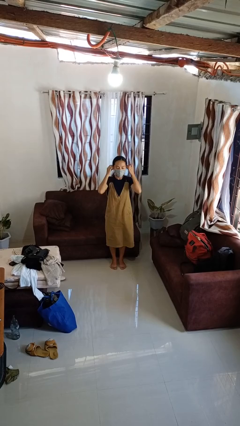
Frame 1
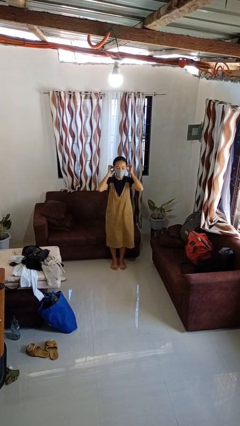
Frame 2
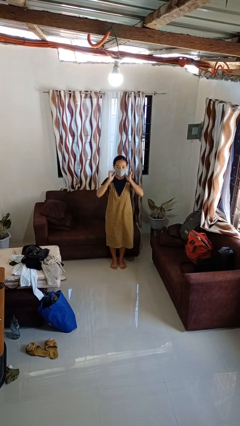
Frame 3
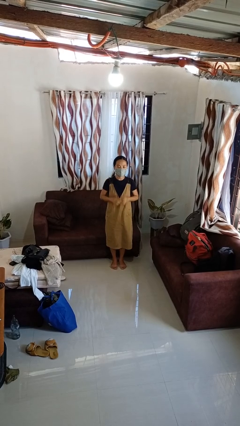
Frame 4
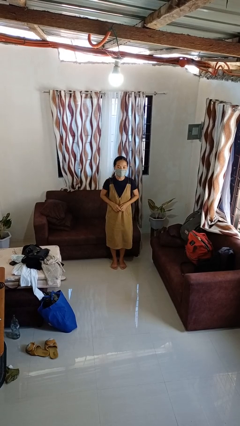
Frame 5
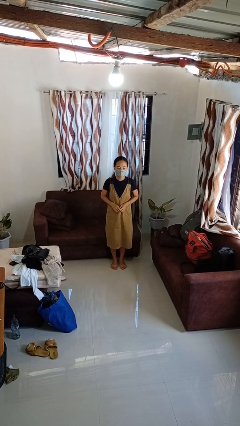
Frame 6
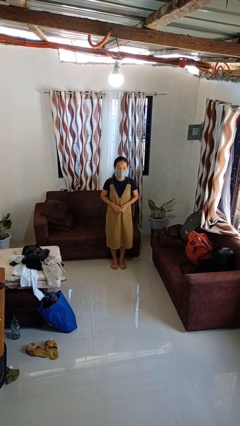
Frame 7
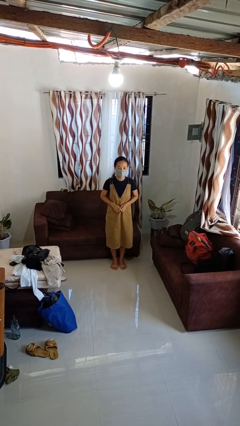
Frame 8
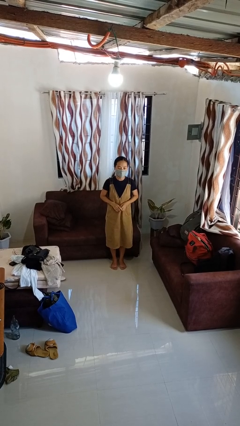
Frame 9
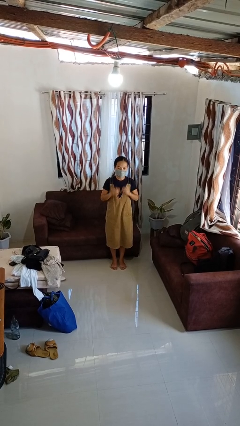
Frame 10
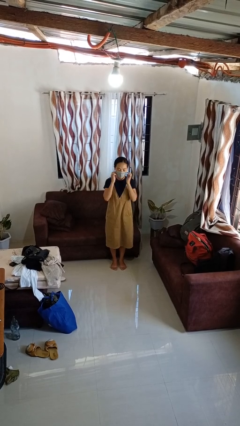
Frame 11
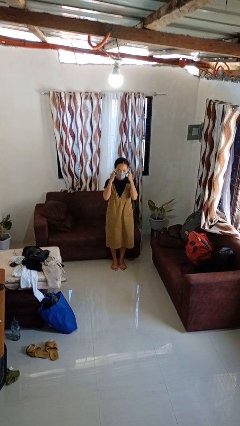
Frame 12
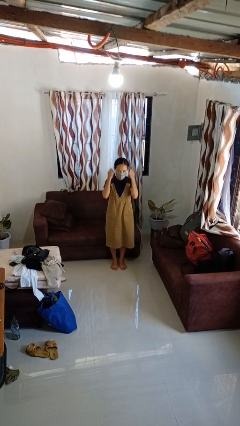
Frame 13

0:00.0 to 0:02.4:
person puts on facemask

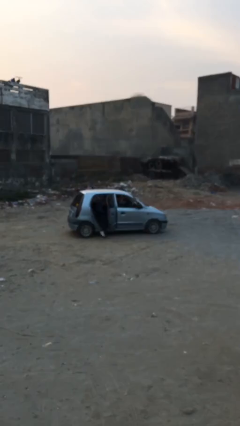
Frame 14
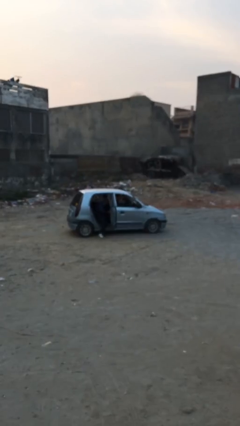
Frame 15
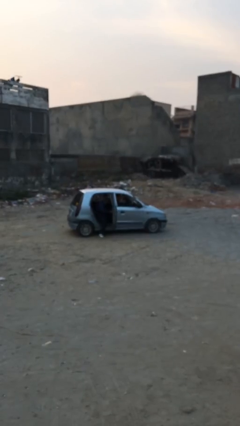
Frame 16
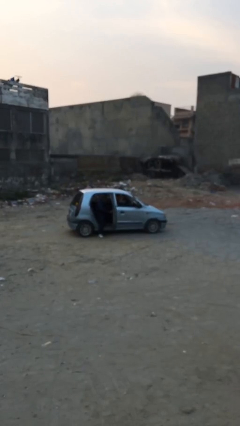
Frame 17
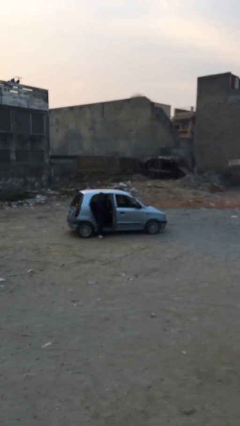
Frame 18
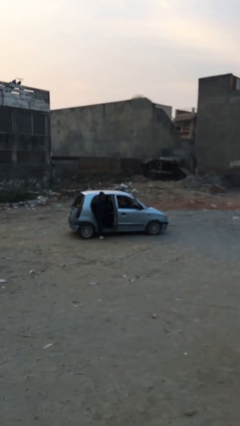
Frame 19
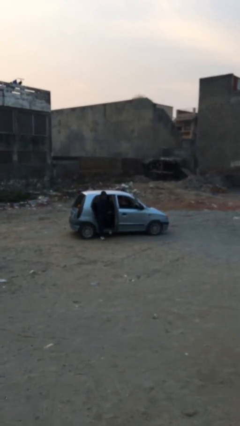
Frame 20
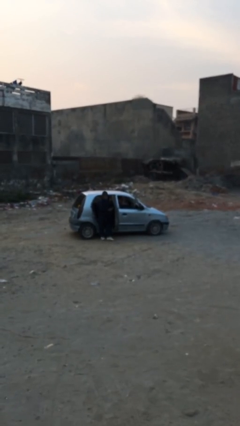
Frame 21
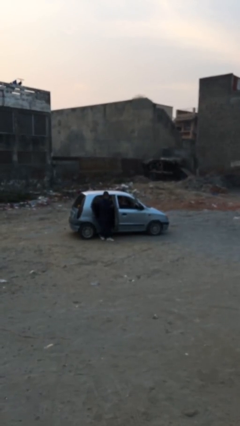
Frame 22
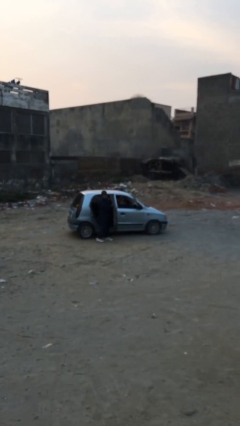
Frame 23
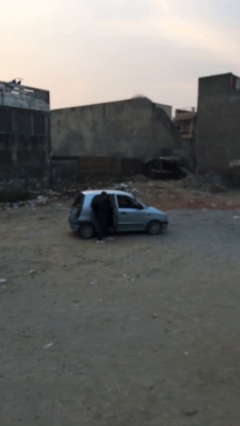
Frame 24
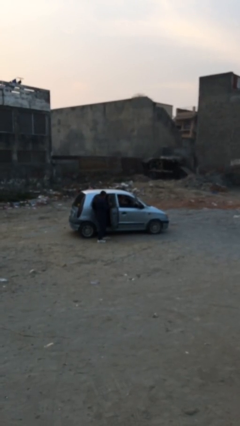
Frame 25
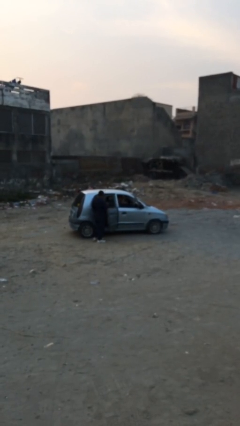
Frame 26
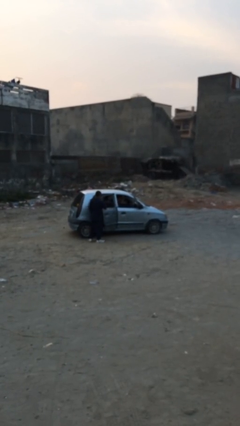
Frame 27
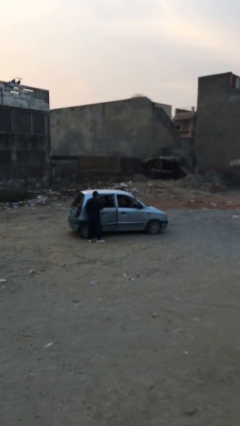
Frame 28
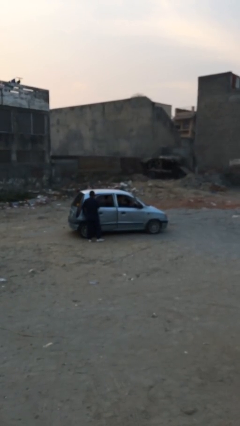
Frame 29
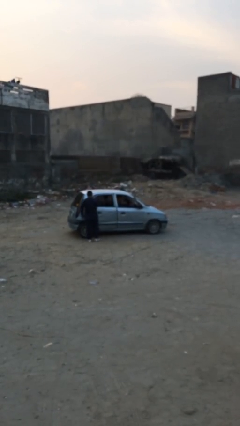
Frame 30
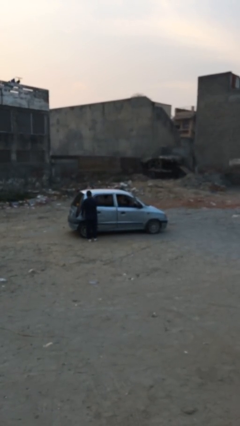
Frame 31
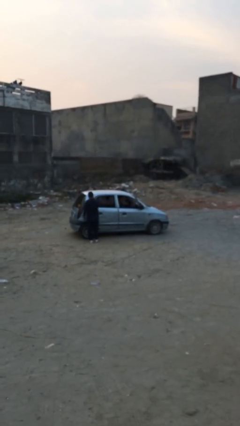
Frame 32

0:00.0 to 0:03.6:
car drops off person

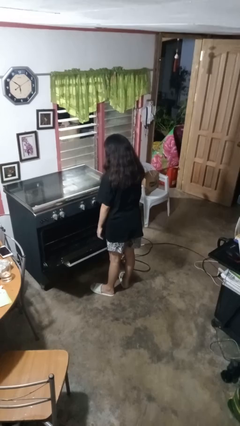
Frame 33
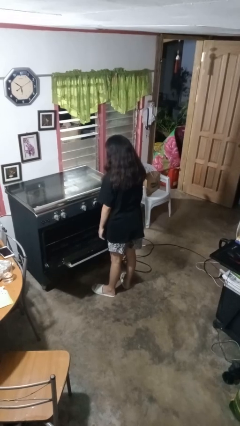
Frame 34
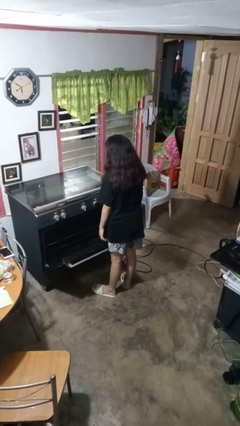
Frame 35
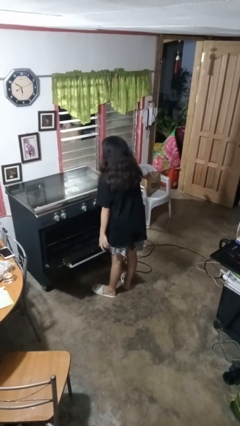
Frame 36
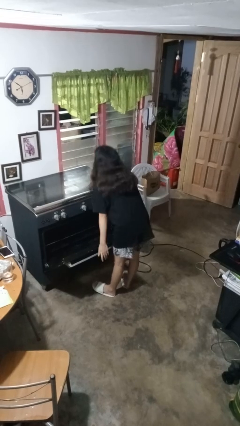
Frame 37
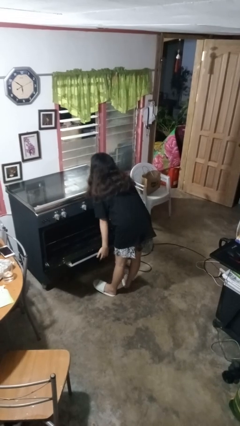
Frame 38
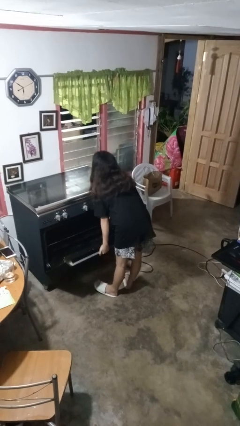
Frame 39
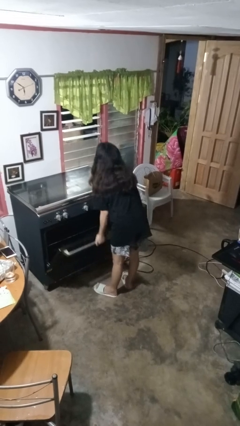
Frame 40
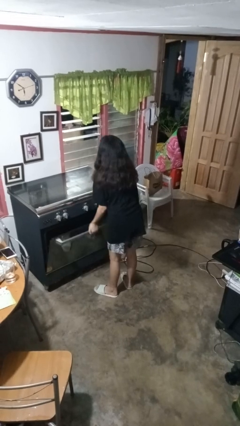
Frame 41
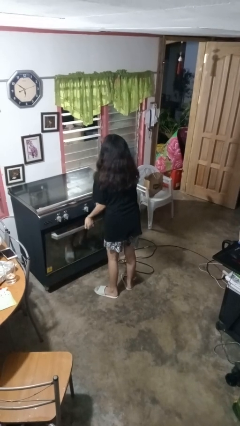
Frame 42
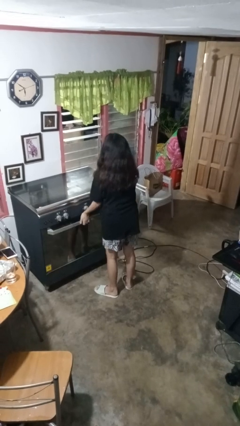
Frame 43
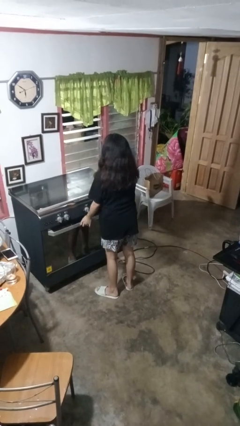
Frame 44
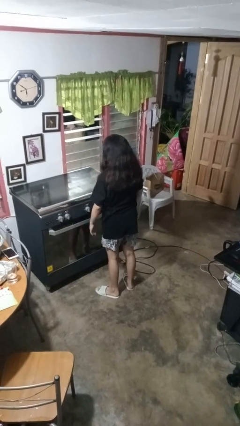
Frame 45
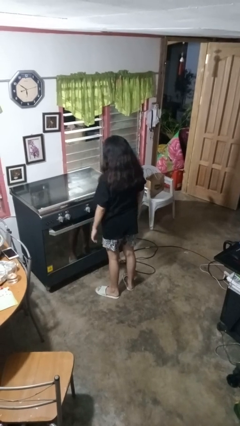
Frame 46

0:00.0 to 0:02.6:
person closes oven door

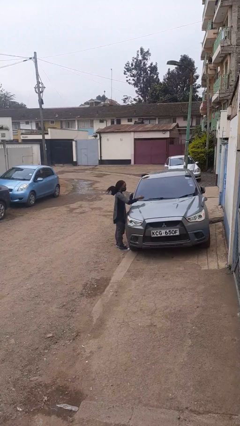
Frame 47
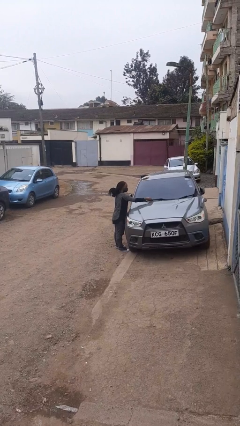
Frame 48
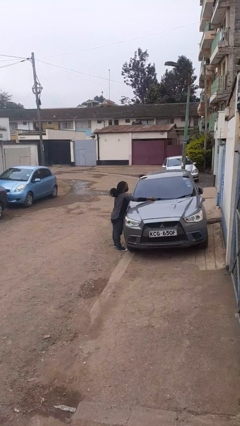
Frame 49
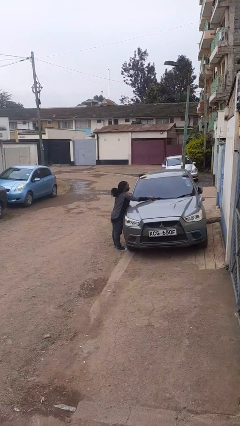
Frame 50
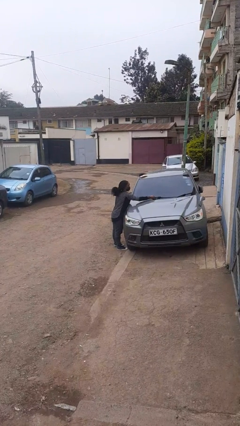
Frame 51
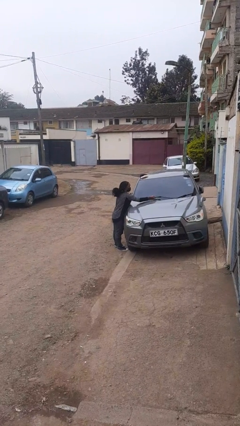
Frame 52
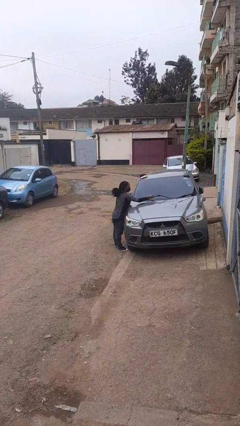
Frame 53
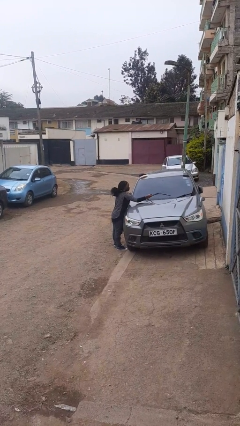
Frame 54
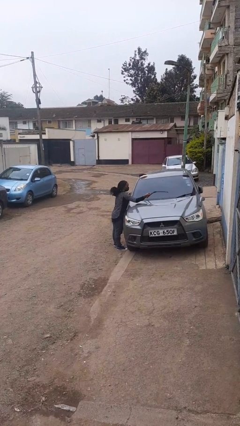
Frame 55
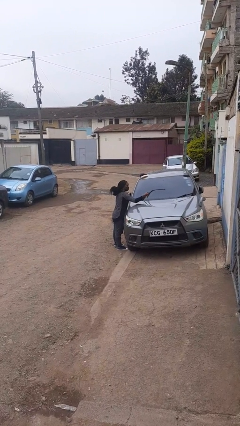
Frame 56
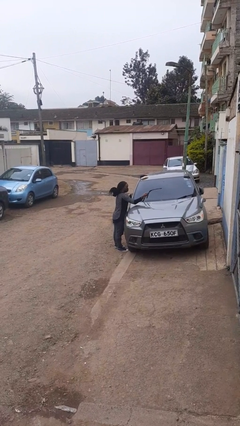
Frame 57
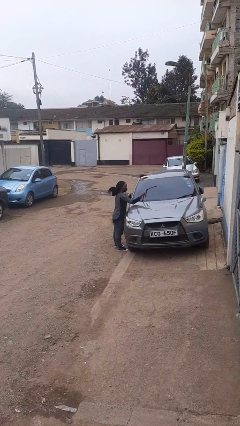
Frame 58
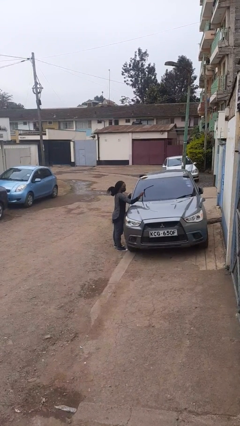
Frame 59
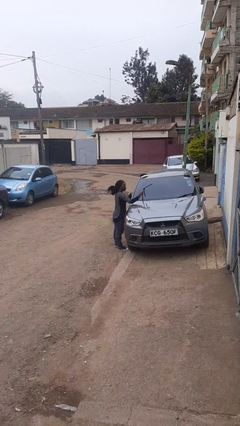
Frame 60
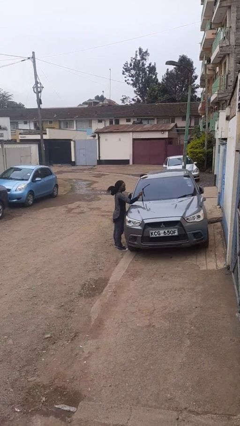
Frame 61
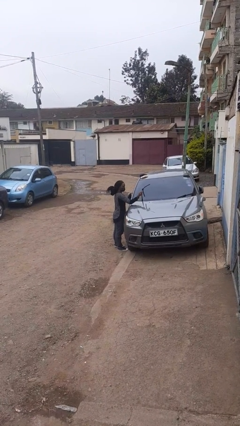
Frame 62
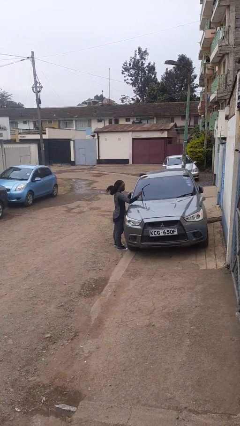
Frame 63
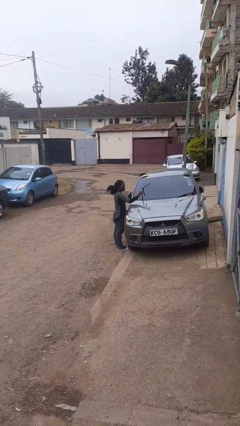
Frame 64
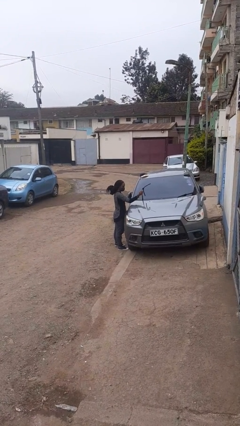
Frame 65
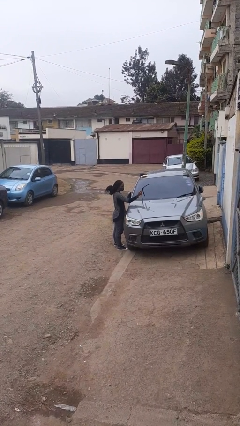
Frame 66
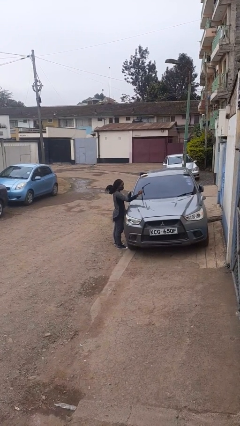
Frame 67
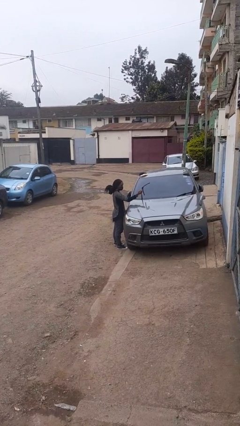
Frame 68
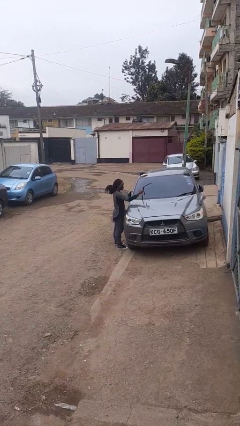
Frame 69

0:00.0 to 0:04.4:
person flips up car wipers

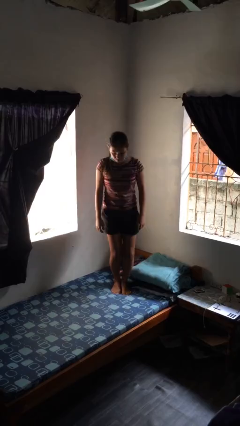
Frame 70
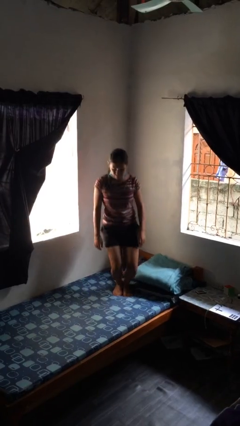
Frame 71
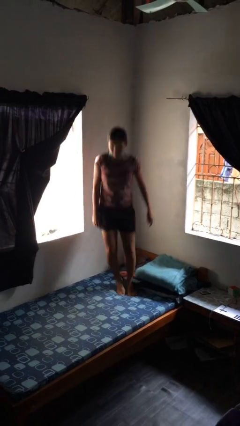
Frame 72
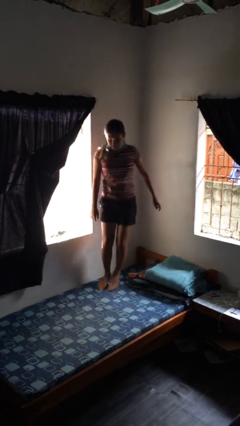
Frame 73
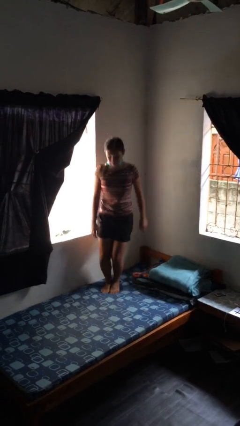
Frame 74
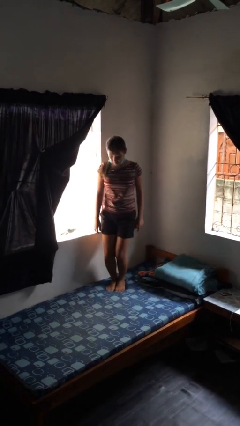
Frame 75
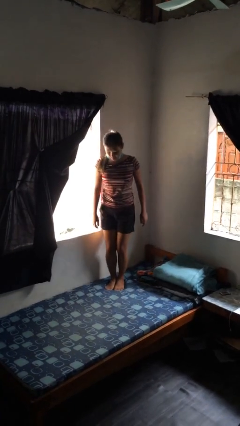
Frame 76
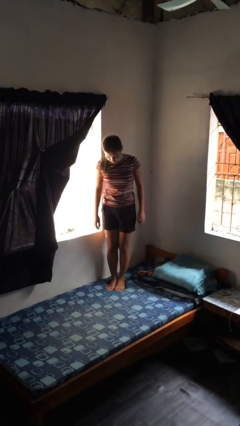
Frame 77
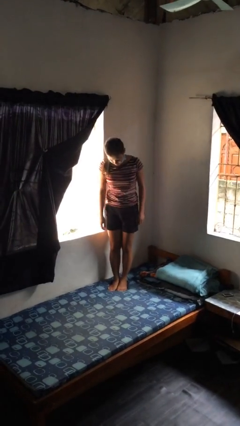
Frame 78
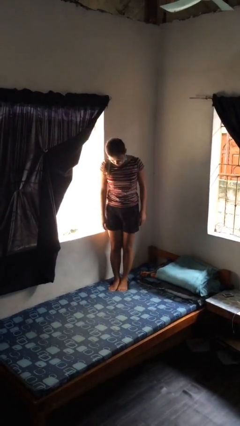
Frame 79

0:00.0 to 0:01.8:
person jumps on bed

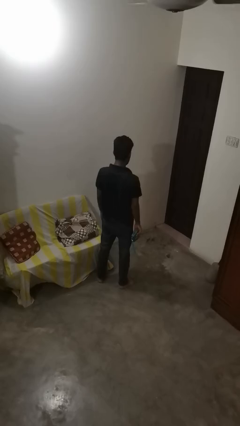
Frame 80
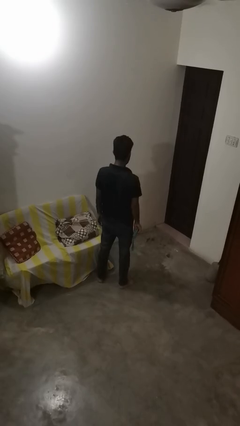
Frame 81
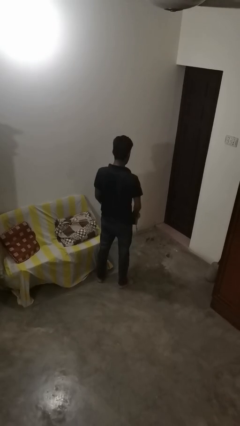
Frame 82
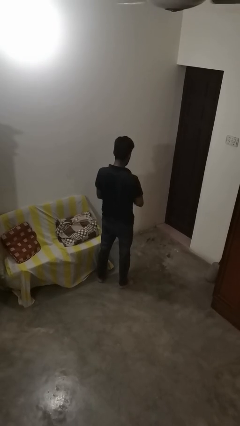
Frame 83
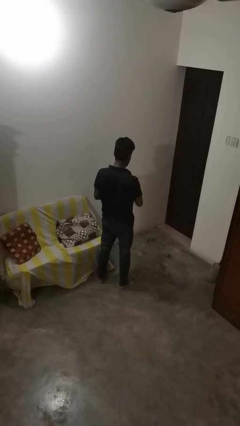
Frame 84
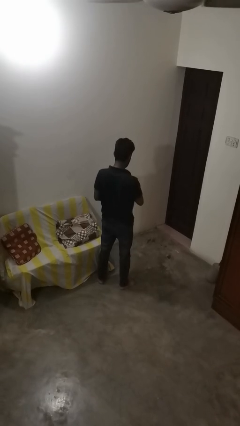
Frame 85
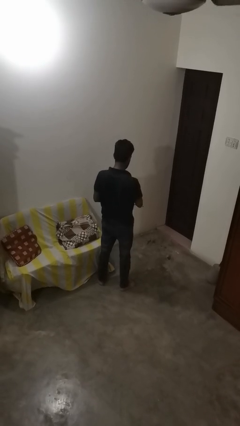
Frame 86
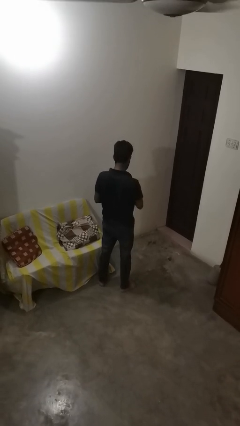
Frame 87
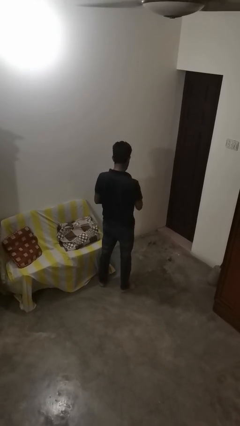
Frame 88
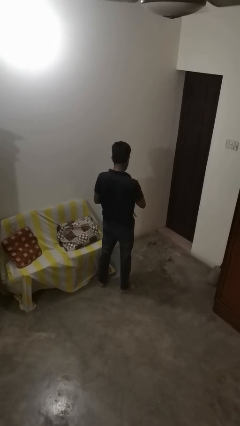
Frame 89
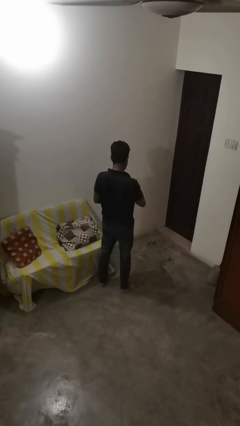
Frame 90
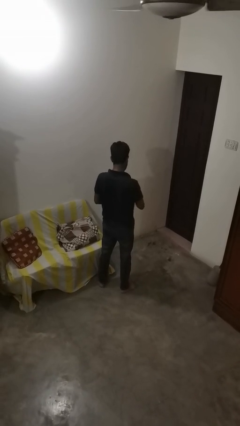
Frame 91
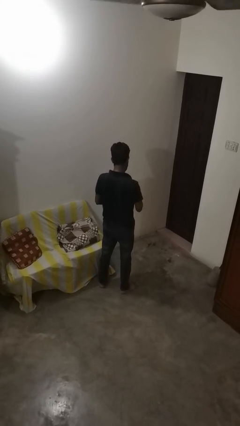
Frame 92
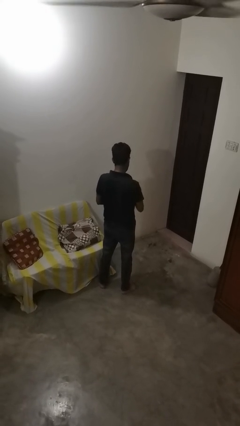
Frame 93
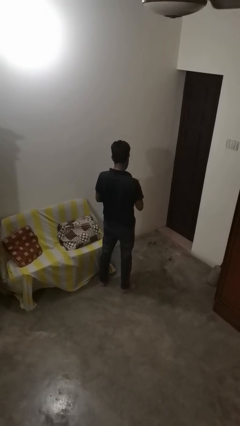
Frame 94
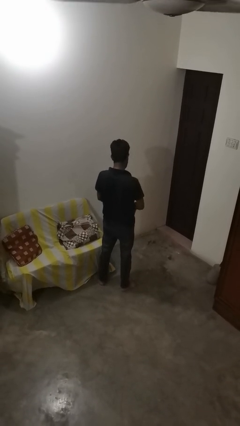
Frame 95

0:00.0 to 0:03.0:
person searches in bag
